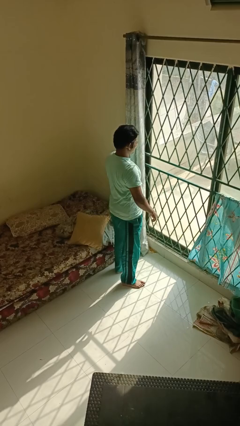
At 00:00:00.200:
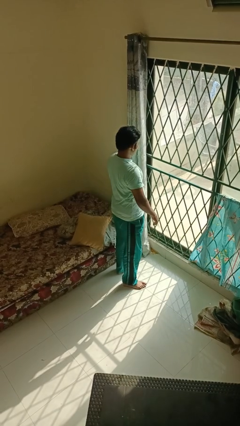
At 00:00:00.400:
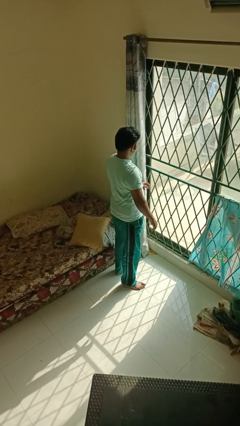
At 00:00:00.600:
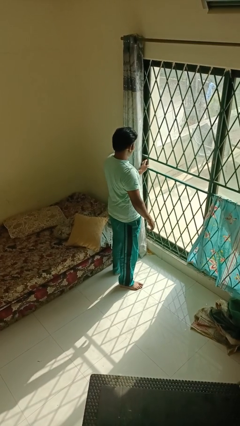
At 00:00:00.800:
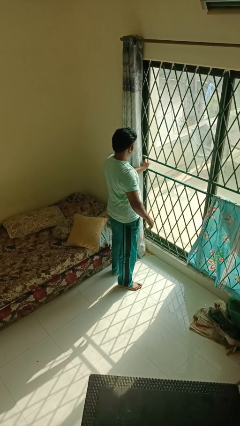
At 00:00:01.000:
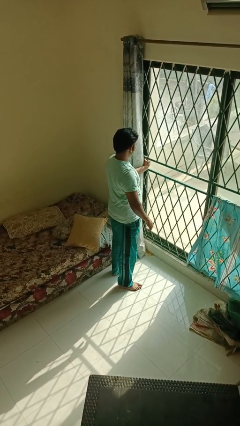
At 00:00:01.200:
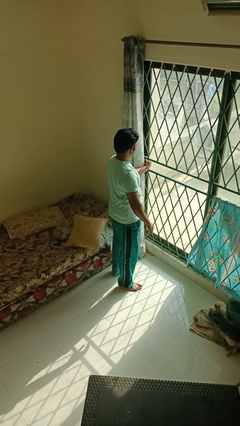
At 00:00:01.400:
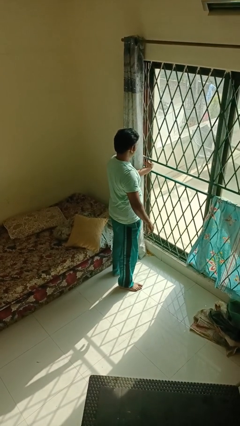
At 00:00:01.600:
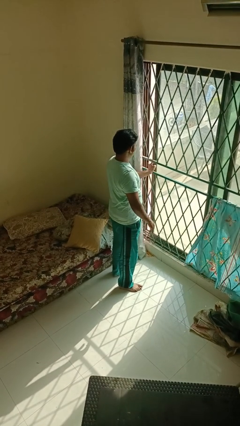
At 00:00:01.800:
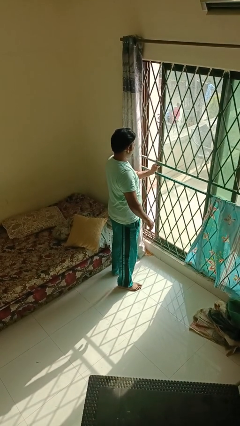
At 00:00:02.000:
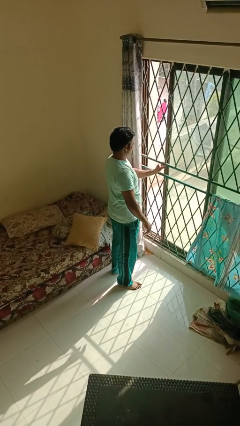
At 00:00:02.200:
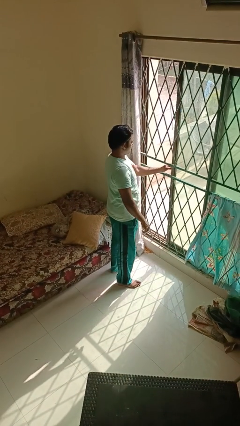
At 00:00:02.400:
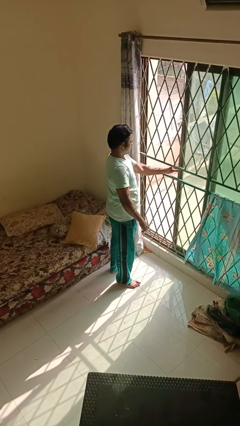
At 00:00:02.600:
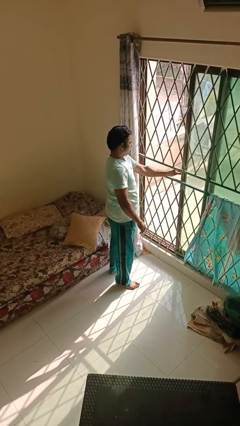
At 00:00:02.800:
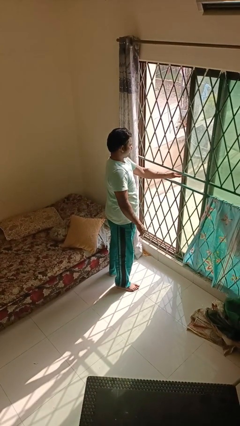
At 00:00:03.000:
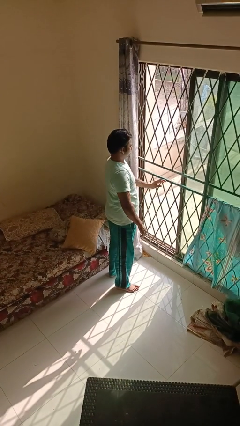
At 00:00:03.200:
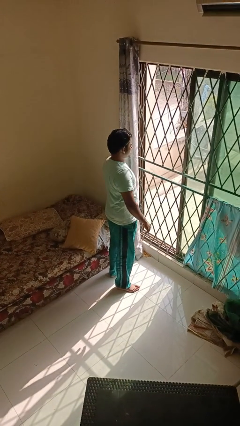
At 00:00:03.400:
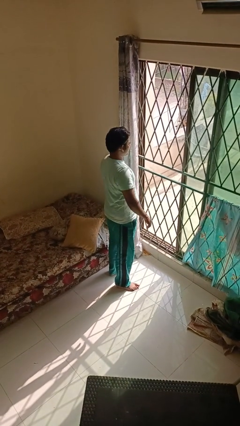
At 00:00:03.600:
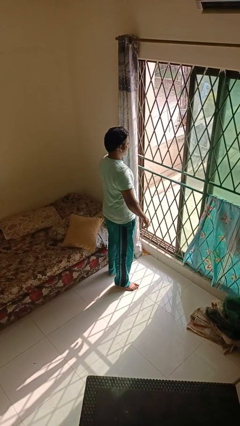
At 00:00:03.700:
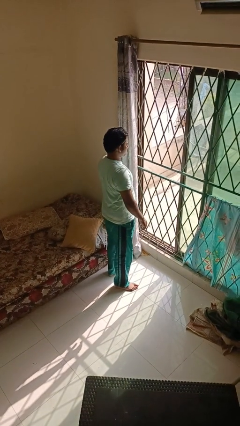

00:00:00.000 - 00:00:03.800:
person opens home window

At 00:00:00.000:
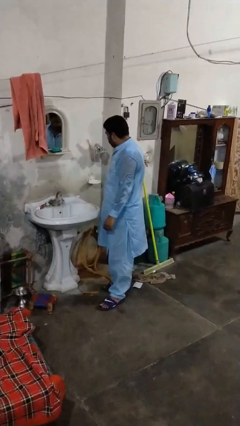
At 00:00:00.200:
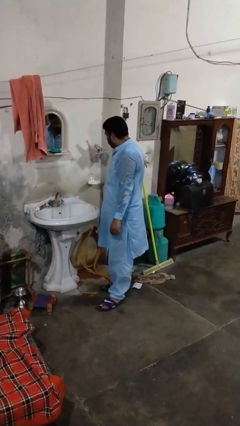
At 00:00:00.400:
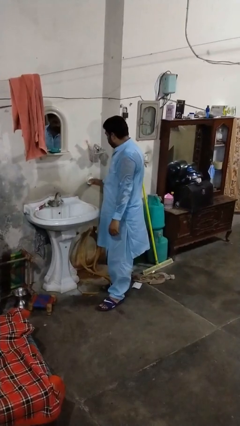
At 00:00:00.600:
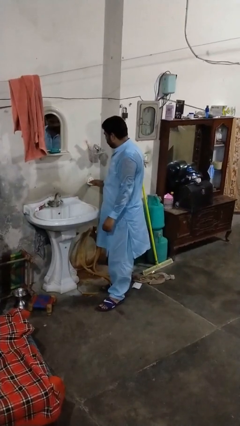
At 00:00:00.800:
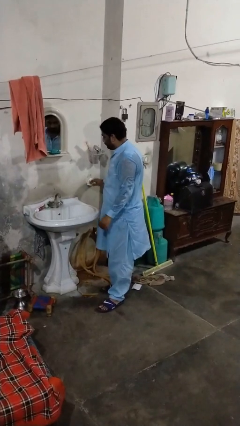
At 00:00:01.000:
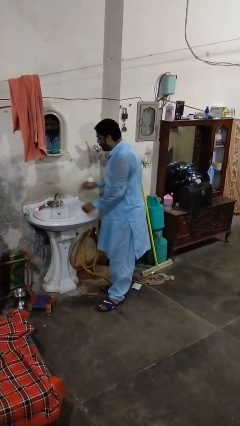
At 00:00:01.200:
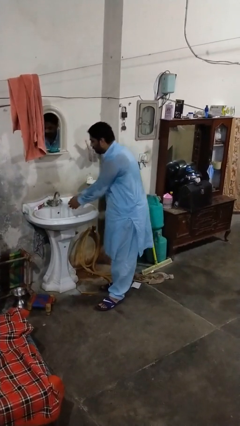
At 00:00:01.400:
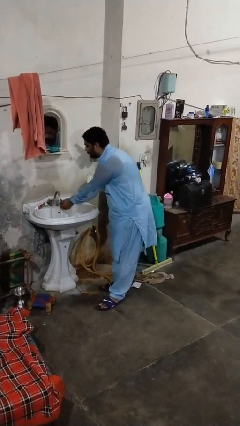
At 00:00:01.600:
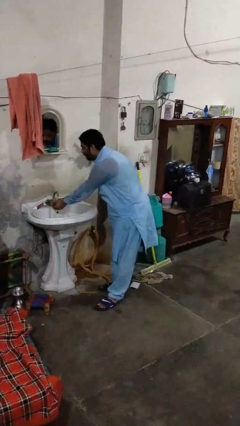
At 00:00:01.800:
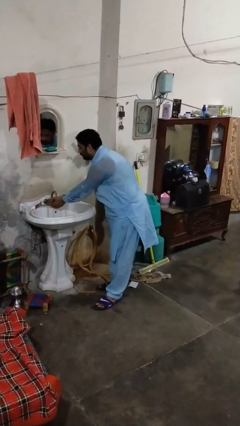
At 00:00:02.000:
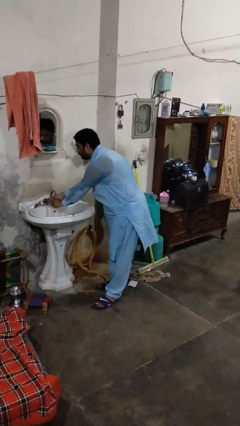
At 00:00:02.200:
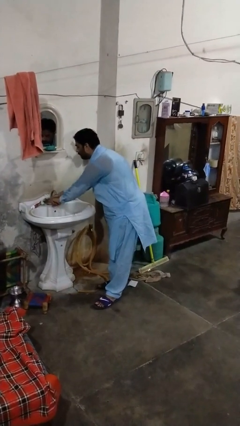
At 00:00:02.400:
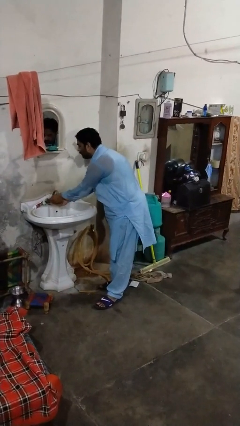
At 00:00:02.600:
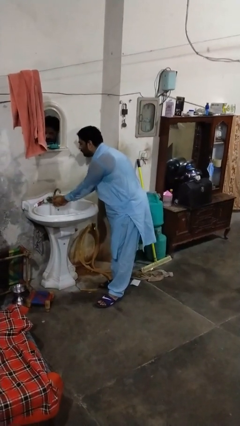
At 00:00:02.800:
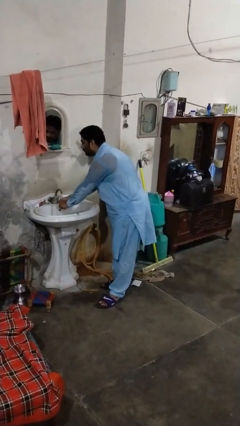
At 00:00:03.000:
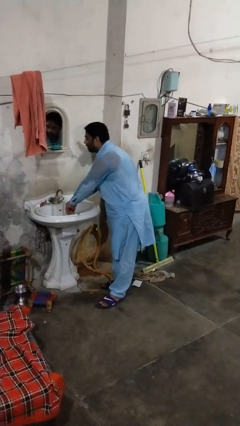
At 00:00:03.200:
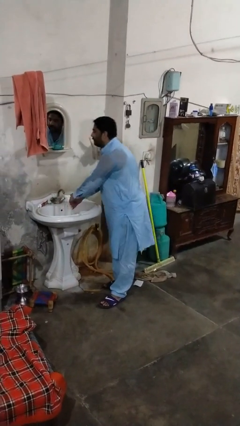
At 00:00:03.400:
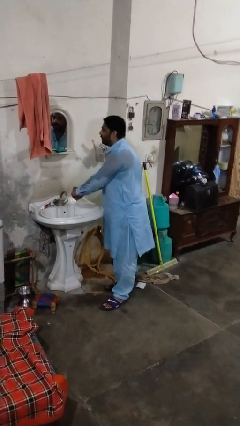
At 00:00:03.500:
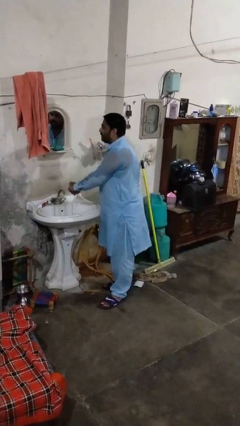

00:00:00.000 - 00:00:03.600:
person washes hands

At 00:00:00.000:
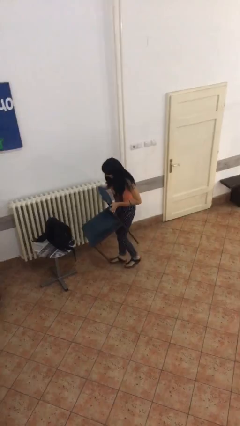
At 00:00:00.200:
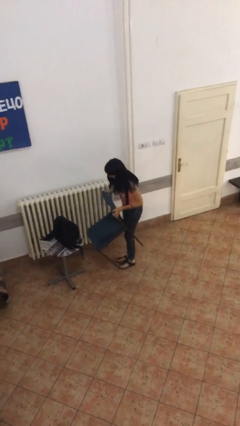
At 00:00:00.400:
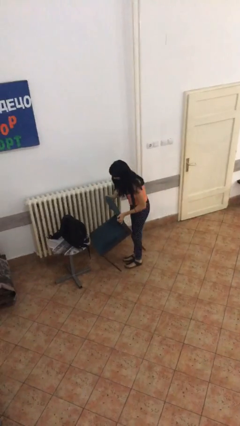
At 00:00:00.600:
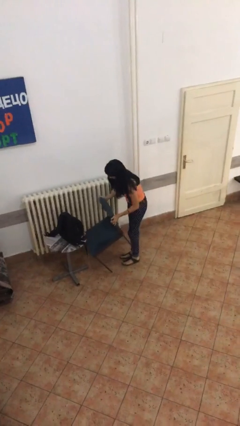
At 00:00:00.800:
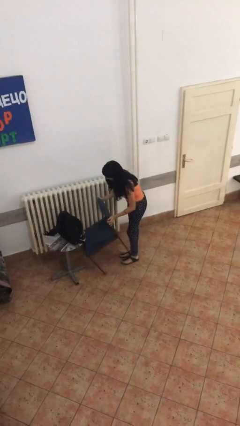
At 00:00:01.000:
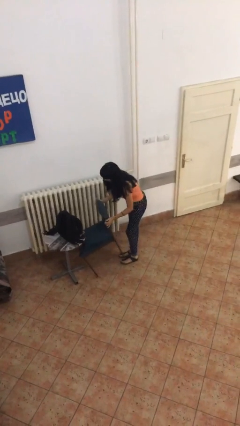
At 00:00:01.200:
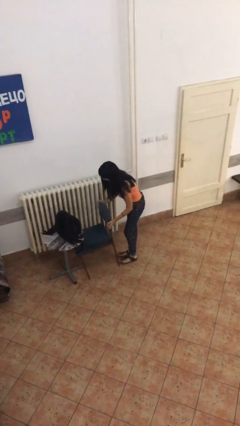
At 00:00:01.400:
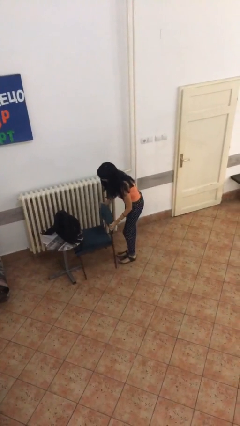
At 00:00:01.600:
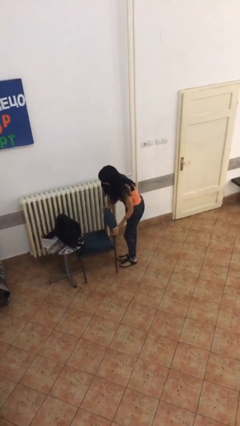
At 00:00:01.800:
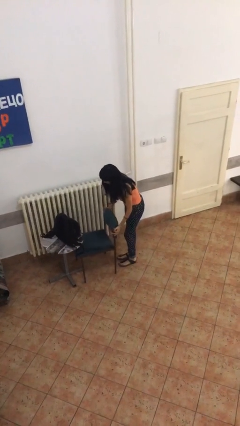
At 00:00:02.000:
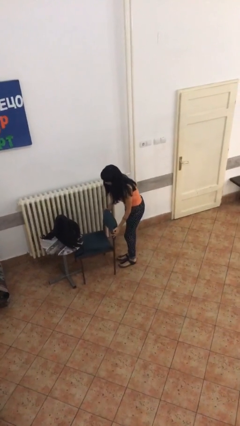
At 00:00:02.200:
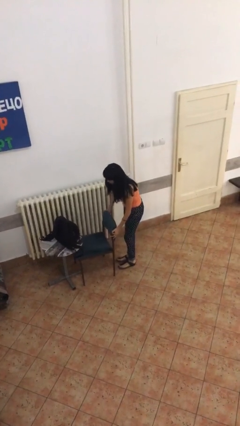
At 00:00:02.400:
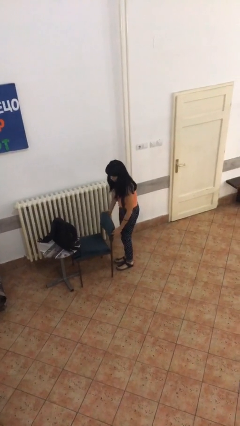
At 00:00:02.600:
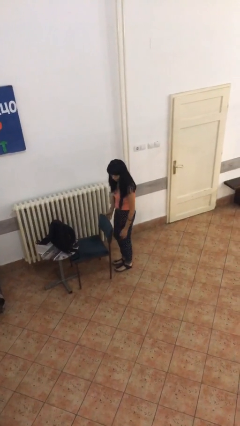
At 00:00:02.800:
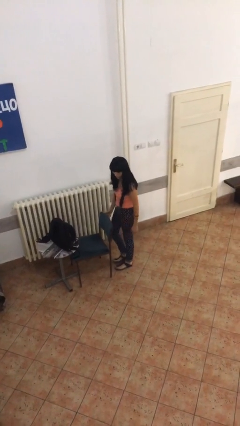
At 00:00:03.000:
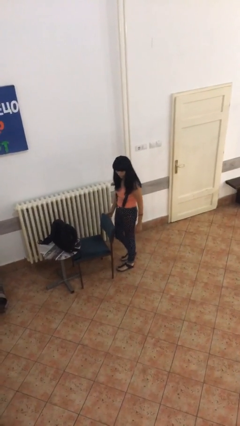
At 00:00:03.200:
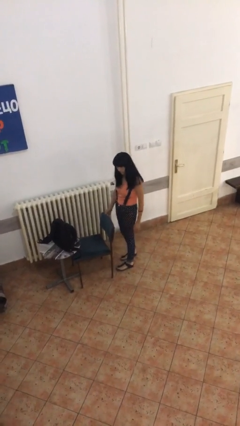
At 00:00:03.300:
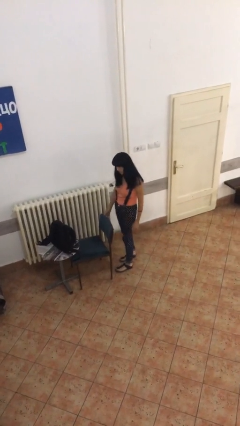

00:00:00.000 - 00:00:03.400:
person puts down object on floor

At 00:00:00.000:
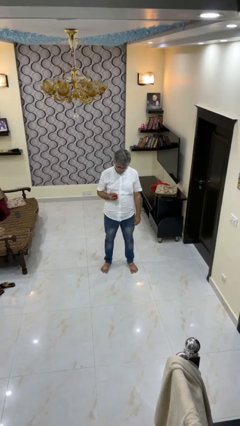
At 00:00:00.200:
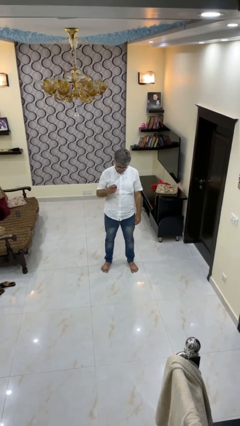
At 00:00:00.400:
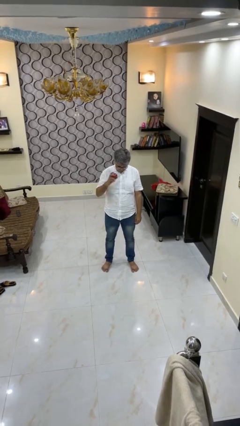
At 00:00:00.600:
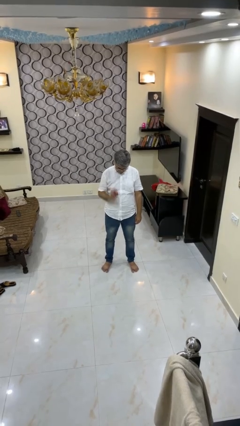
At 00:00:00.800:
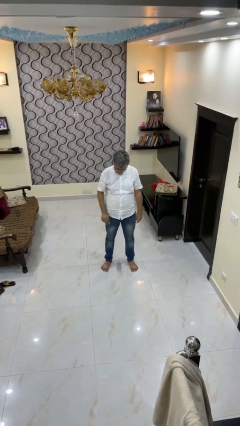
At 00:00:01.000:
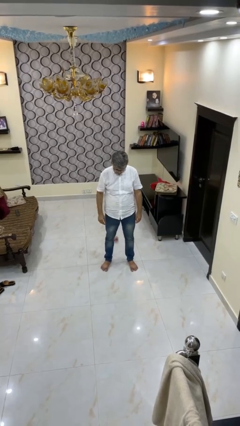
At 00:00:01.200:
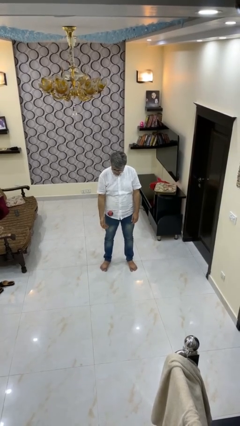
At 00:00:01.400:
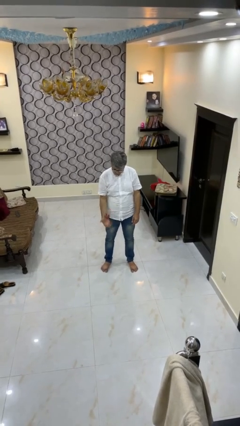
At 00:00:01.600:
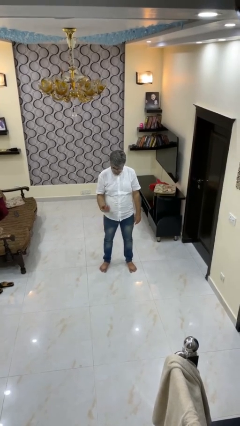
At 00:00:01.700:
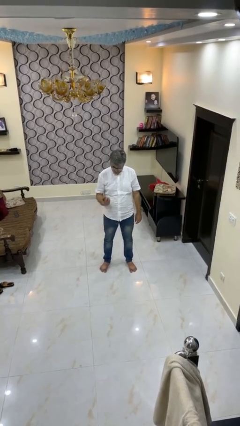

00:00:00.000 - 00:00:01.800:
person bounces ball on floor

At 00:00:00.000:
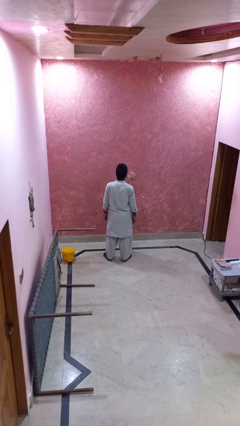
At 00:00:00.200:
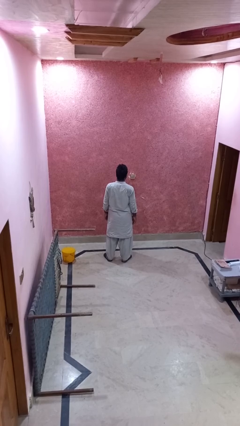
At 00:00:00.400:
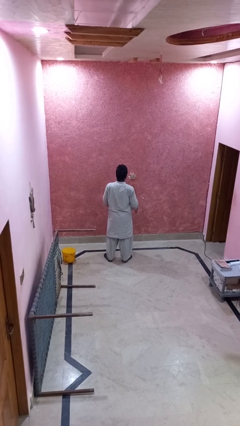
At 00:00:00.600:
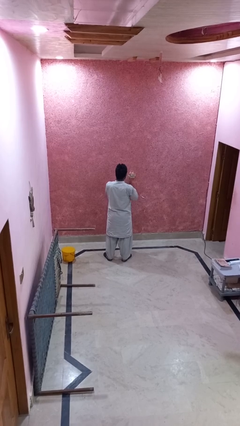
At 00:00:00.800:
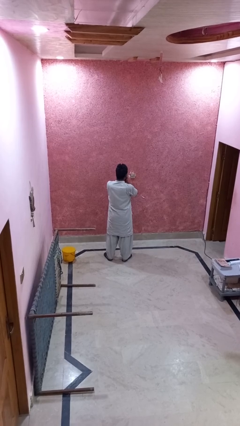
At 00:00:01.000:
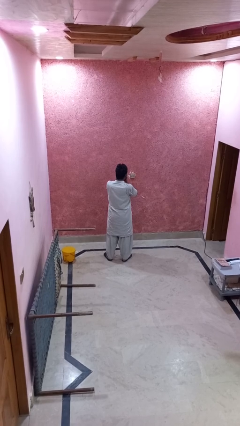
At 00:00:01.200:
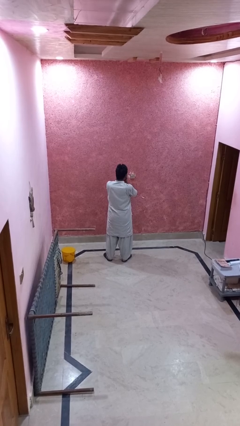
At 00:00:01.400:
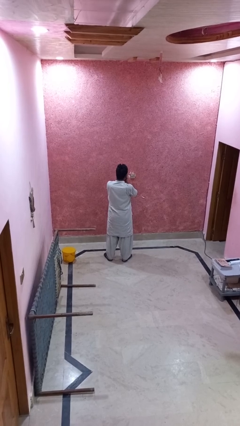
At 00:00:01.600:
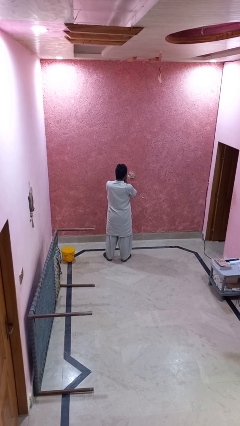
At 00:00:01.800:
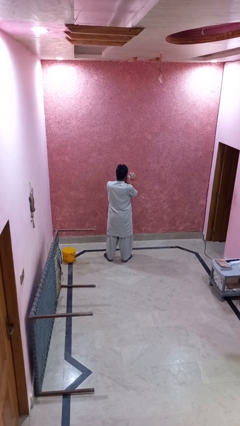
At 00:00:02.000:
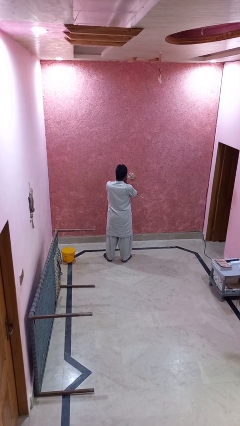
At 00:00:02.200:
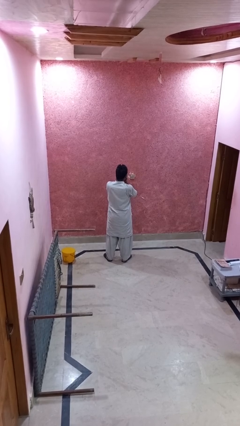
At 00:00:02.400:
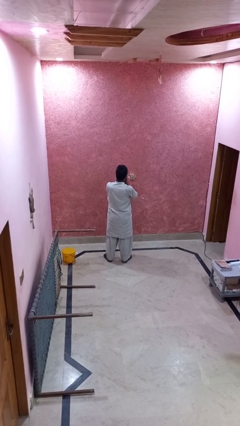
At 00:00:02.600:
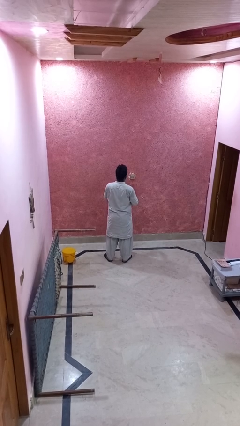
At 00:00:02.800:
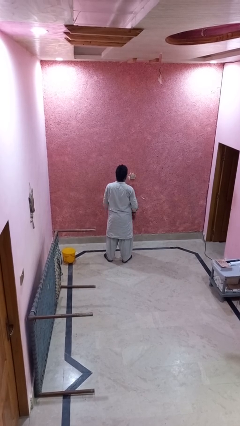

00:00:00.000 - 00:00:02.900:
person sneezes into hand

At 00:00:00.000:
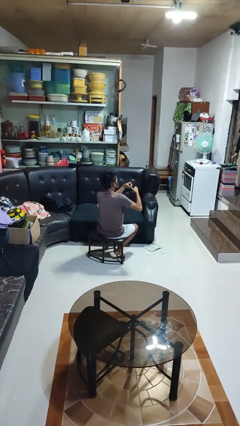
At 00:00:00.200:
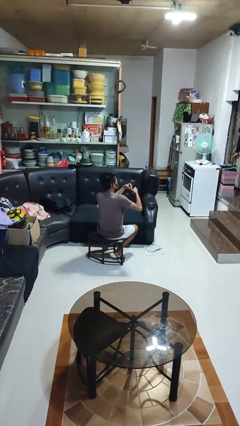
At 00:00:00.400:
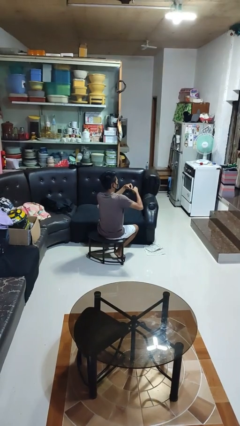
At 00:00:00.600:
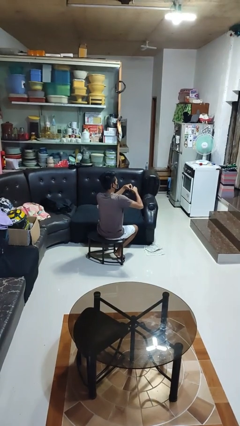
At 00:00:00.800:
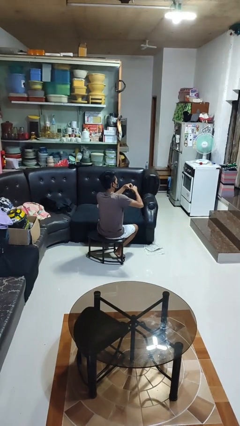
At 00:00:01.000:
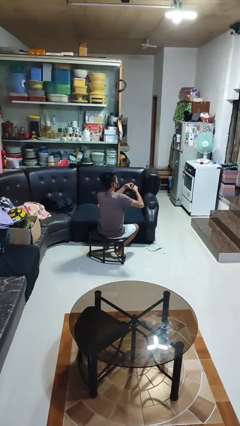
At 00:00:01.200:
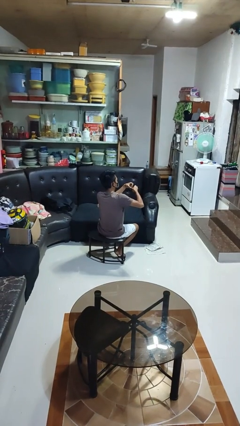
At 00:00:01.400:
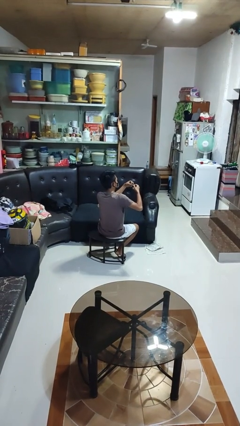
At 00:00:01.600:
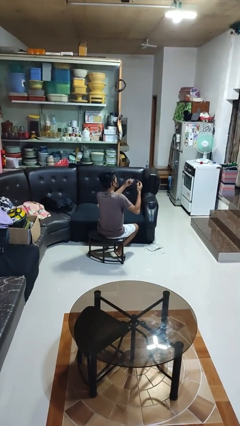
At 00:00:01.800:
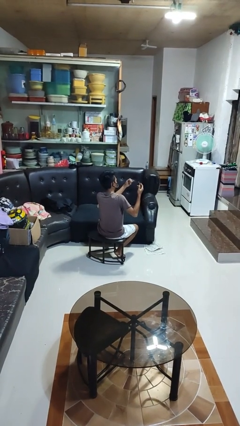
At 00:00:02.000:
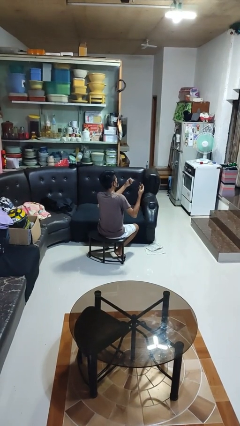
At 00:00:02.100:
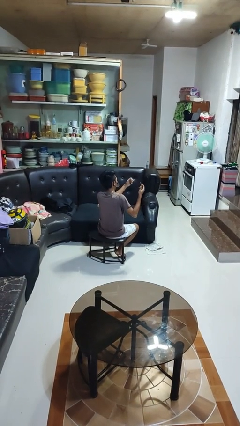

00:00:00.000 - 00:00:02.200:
person clips fingernails
